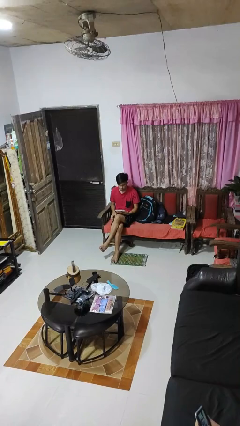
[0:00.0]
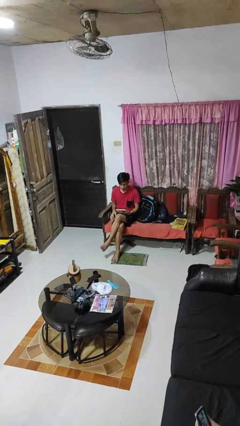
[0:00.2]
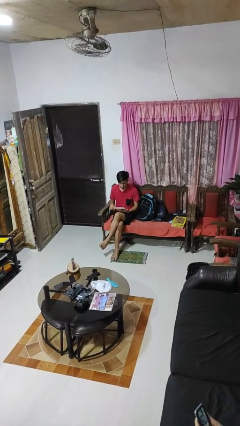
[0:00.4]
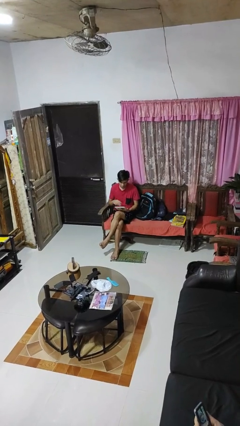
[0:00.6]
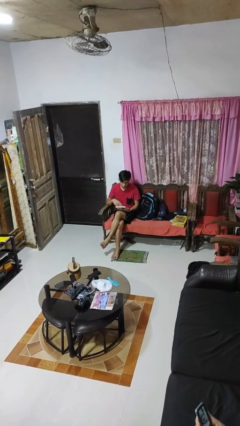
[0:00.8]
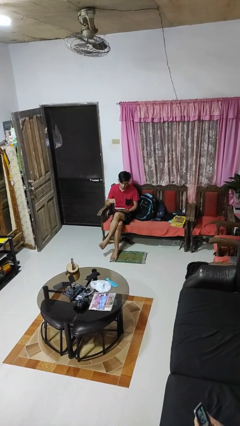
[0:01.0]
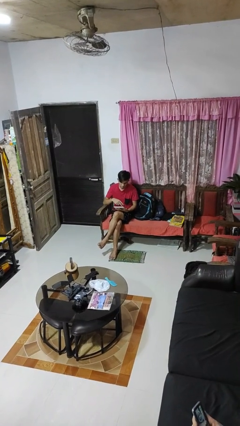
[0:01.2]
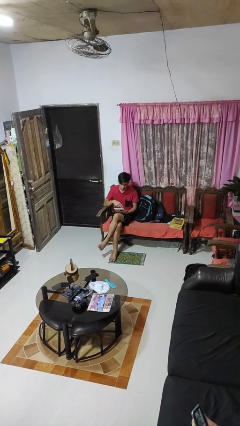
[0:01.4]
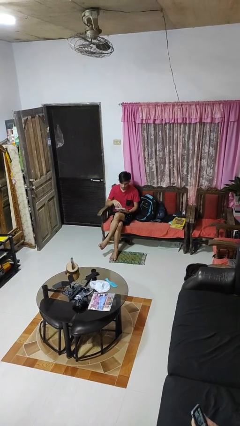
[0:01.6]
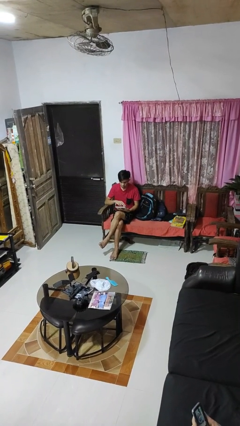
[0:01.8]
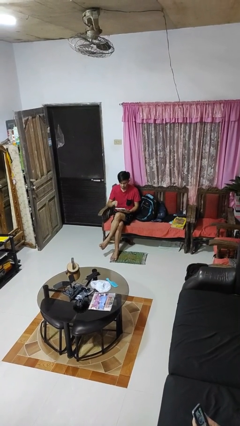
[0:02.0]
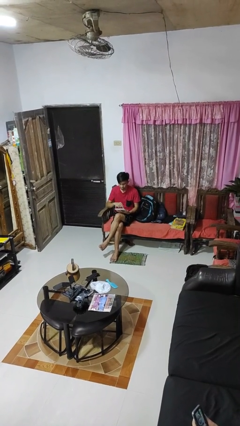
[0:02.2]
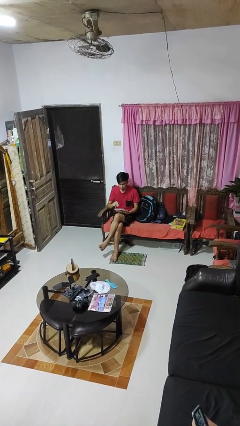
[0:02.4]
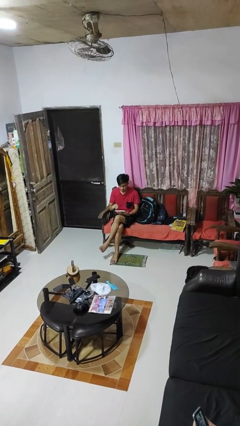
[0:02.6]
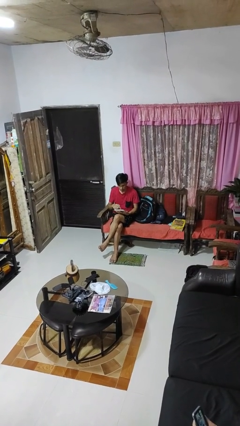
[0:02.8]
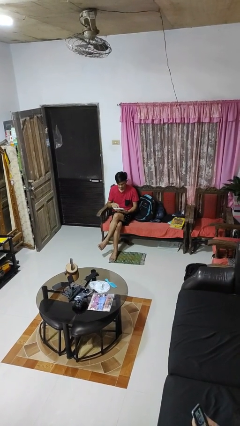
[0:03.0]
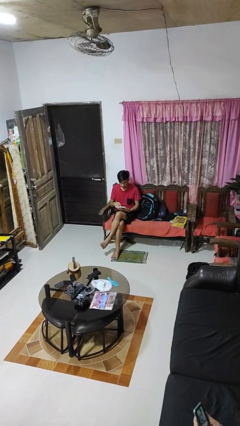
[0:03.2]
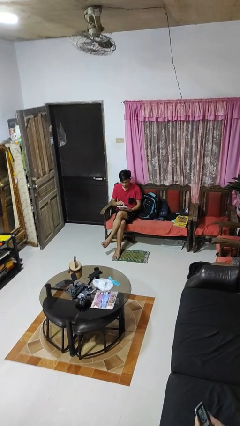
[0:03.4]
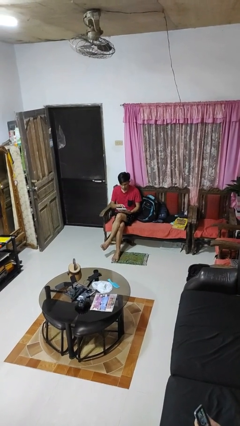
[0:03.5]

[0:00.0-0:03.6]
person interacts with tablet

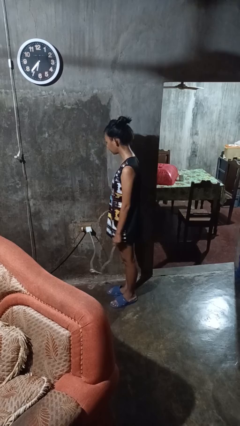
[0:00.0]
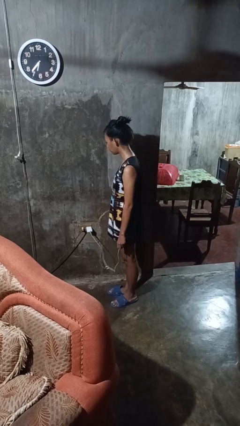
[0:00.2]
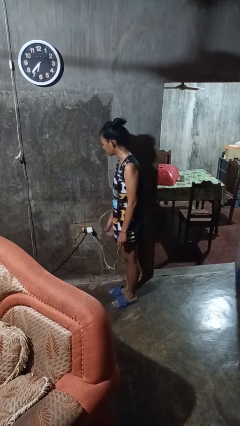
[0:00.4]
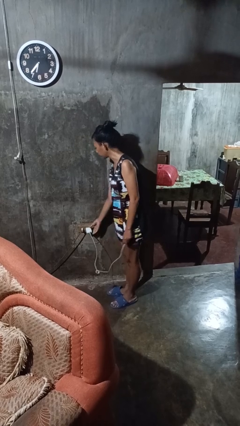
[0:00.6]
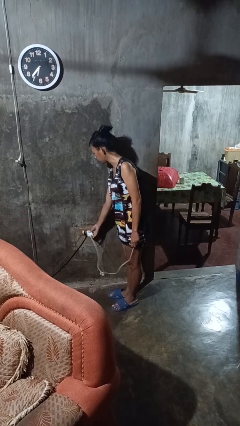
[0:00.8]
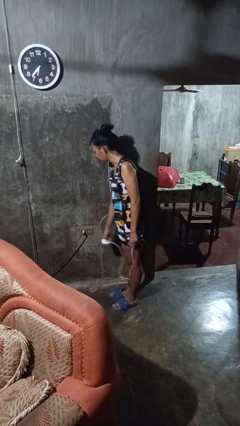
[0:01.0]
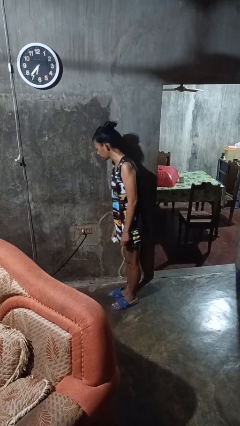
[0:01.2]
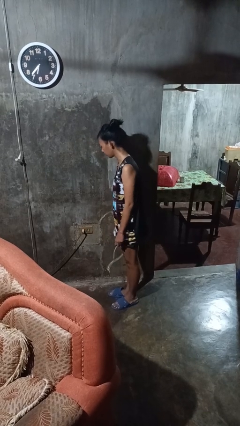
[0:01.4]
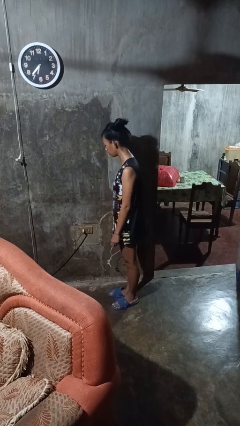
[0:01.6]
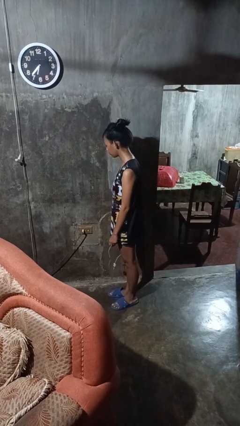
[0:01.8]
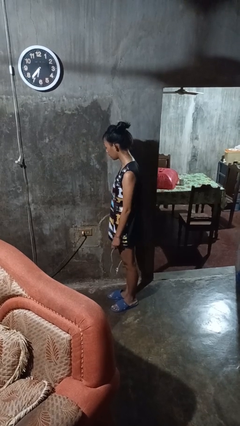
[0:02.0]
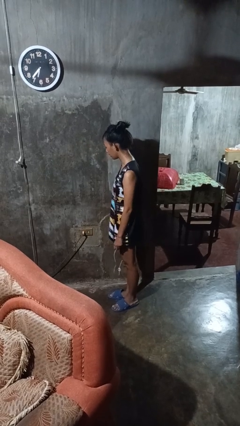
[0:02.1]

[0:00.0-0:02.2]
person unplugs from electrical socket

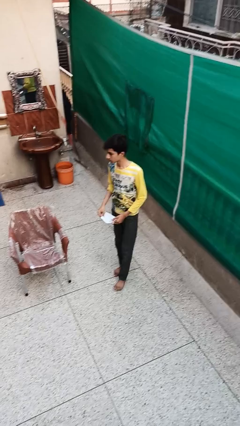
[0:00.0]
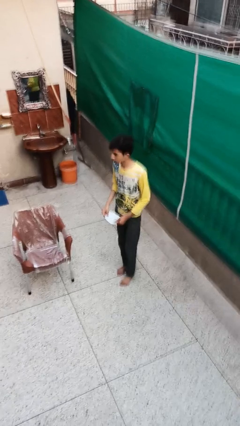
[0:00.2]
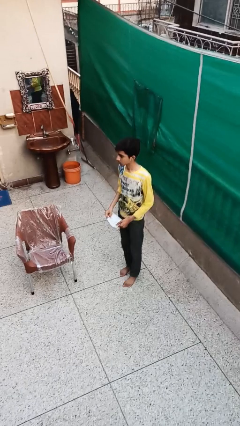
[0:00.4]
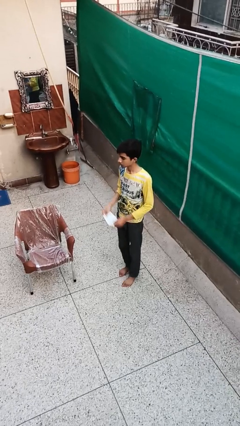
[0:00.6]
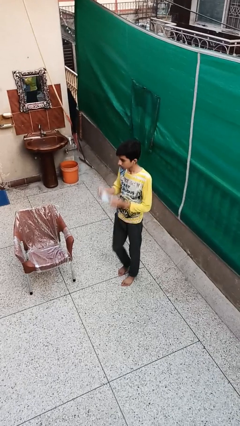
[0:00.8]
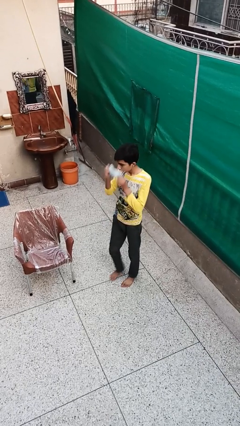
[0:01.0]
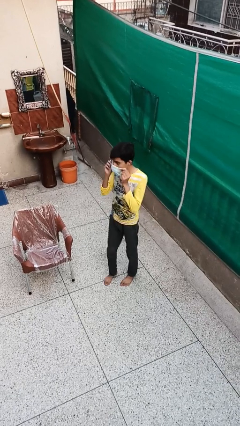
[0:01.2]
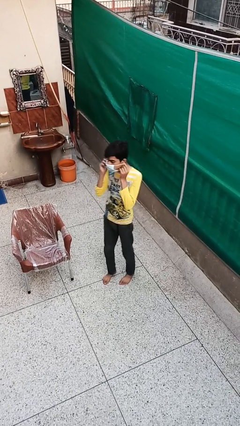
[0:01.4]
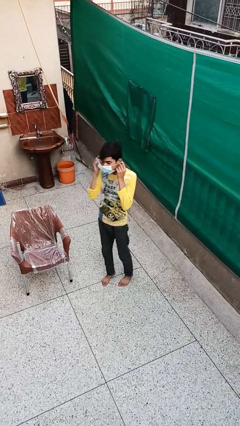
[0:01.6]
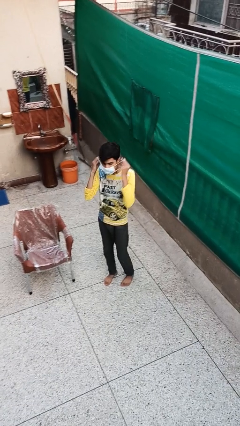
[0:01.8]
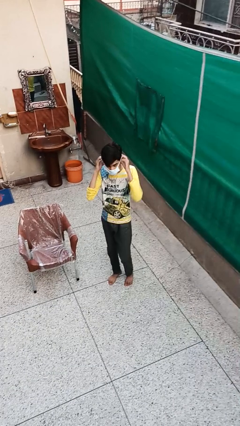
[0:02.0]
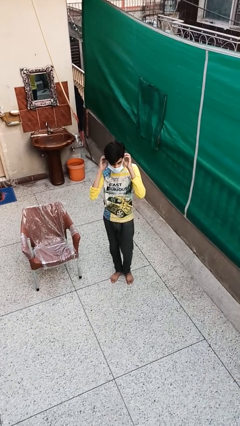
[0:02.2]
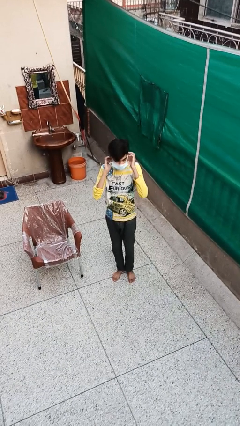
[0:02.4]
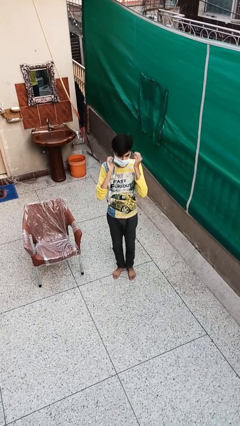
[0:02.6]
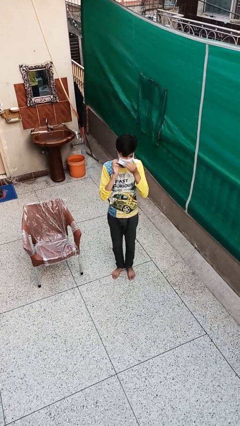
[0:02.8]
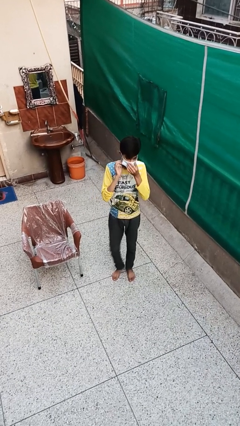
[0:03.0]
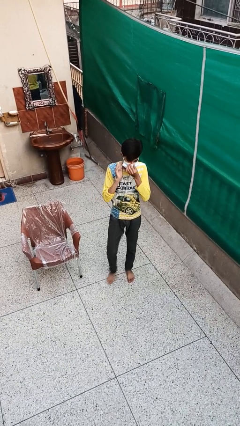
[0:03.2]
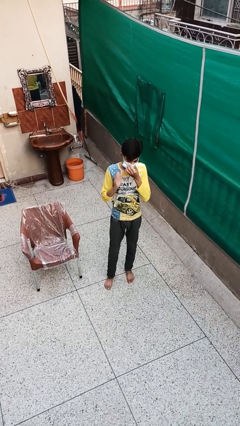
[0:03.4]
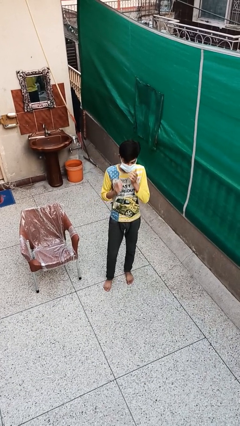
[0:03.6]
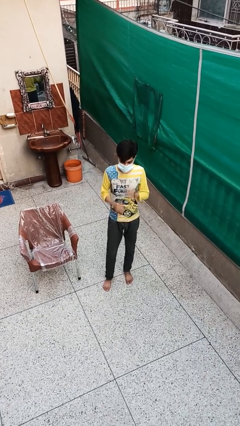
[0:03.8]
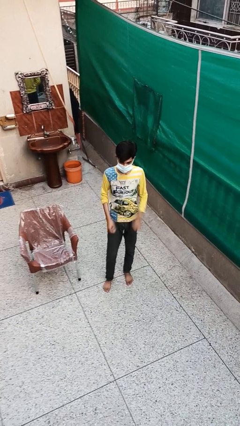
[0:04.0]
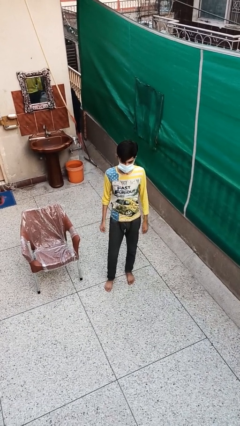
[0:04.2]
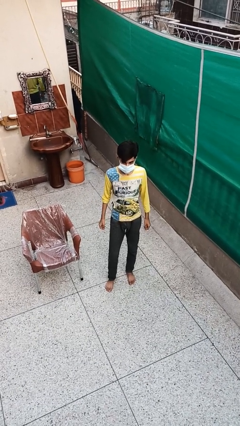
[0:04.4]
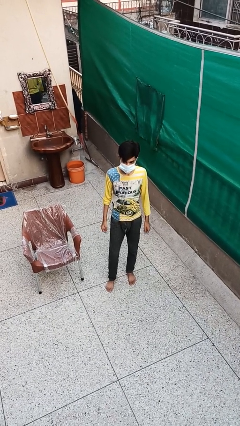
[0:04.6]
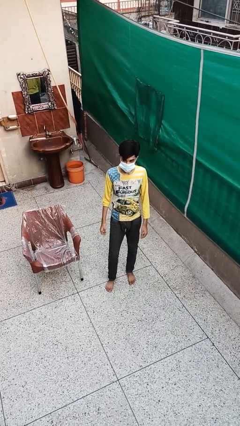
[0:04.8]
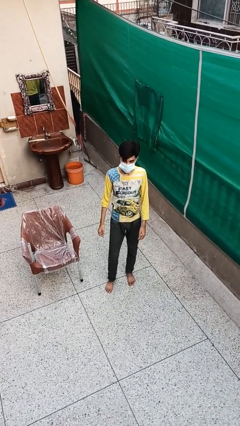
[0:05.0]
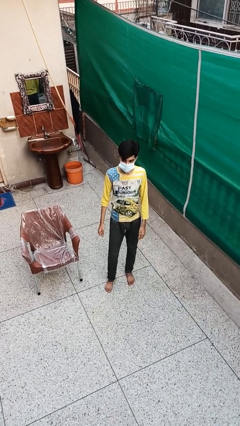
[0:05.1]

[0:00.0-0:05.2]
person puts on facemask

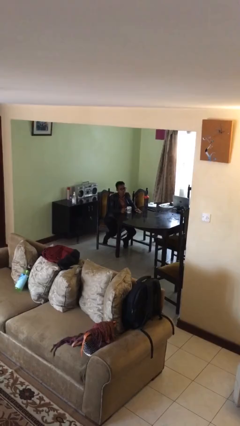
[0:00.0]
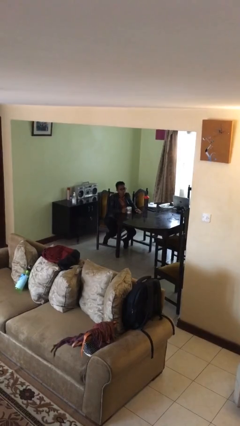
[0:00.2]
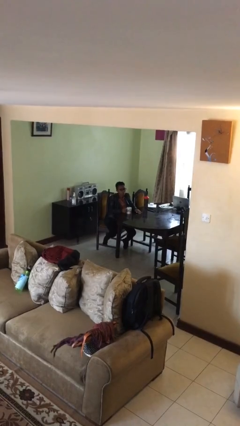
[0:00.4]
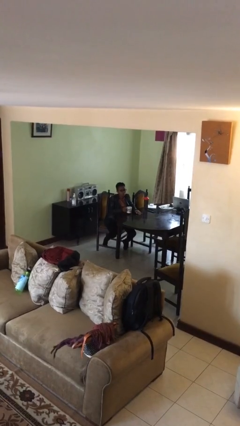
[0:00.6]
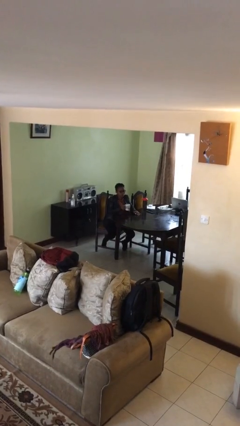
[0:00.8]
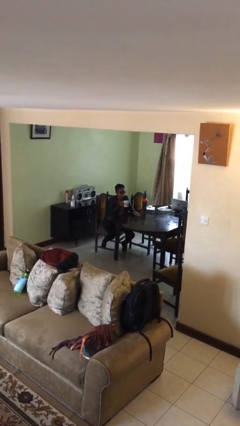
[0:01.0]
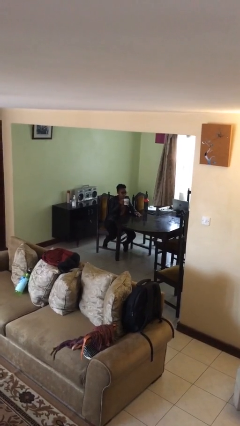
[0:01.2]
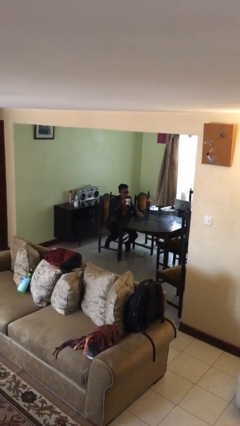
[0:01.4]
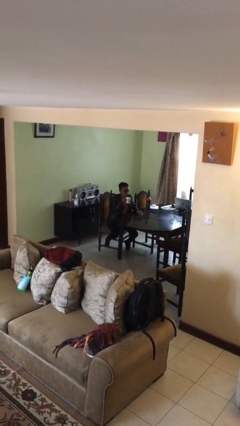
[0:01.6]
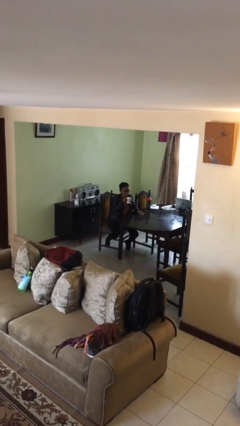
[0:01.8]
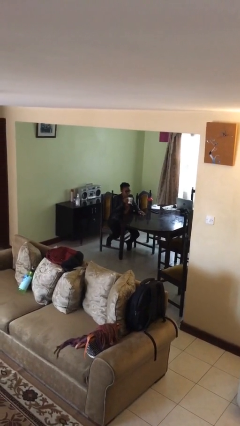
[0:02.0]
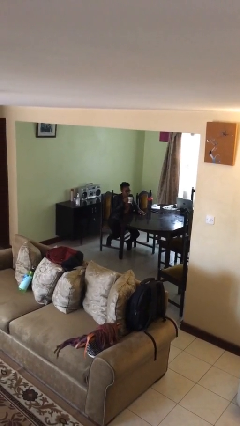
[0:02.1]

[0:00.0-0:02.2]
person picks up object from table

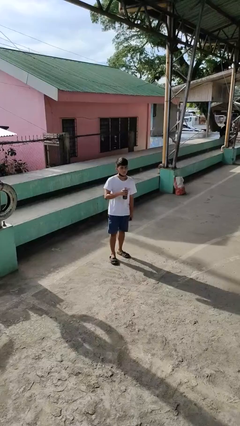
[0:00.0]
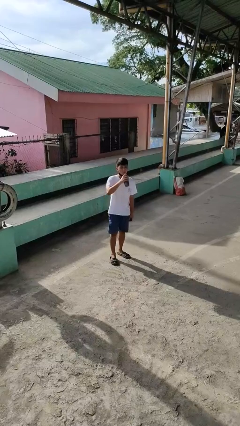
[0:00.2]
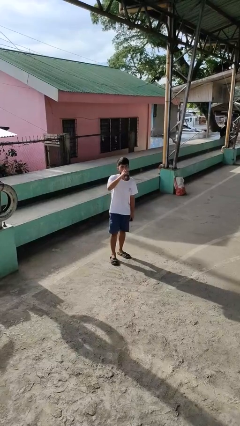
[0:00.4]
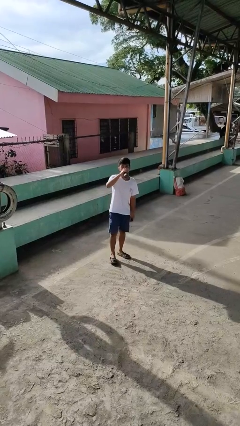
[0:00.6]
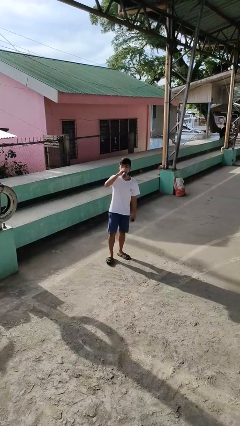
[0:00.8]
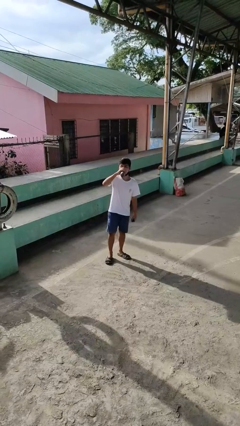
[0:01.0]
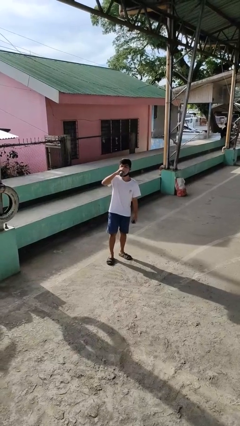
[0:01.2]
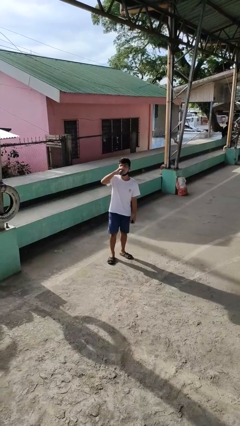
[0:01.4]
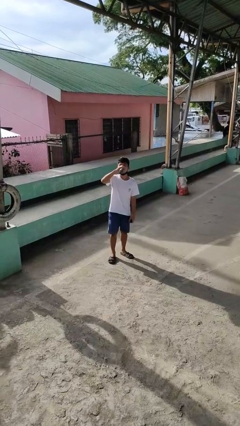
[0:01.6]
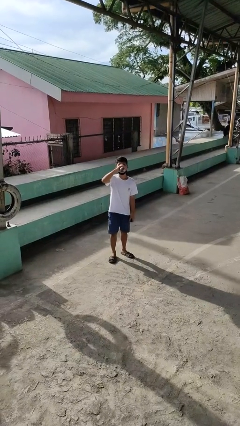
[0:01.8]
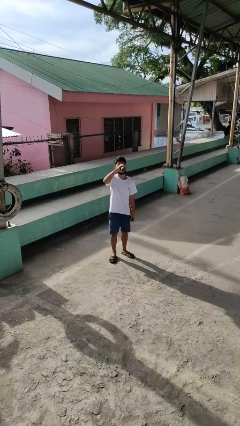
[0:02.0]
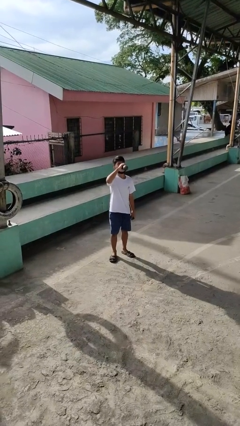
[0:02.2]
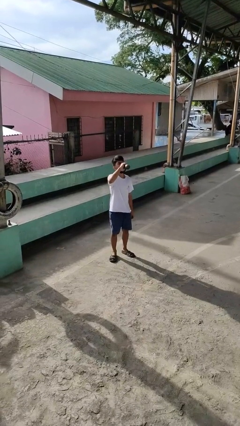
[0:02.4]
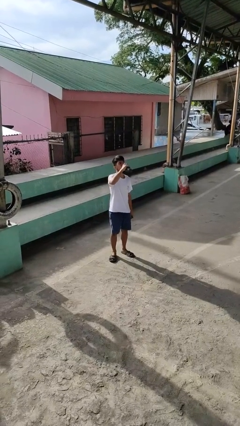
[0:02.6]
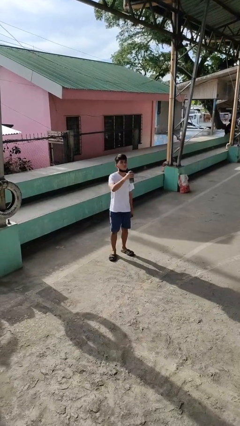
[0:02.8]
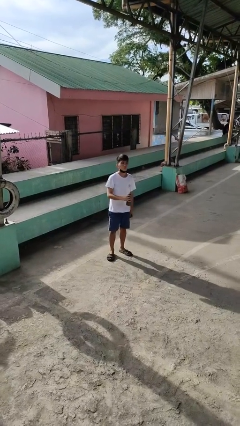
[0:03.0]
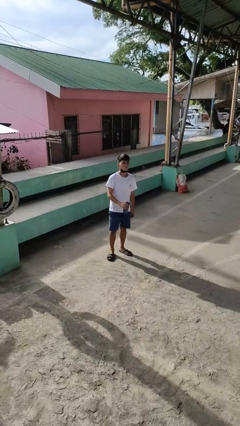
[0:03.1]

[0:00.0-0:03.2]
person drinks from bottle

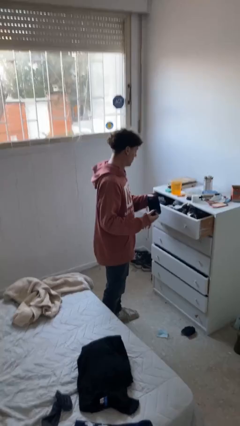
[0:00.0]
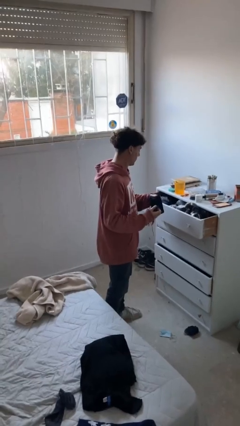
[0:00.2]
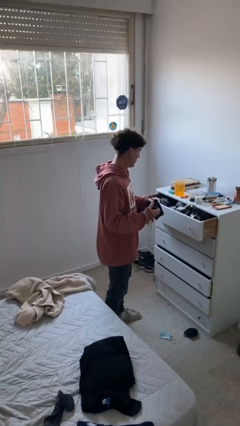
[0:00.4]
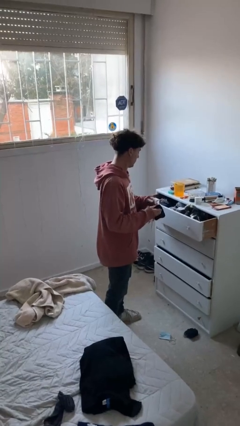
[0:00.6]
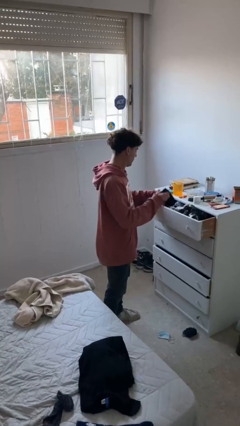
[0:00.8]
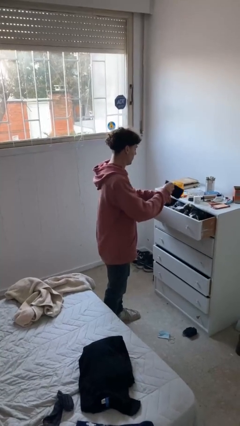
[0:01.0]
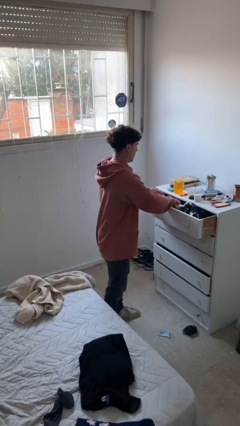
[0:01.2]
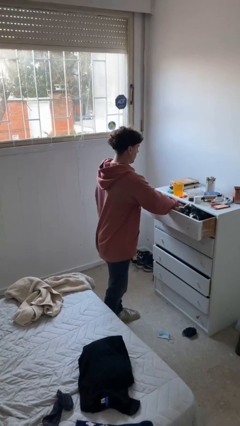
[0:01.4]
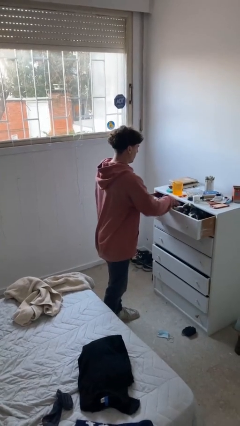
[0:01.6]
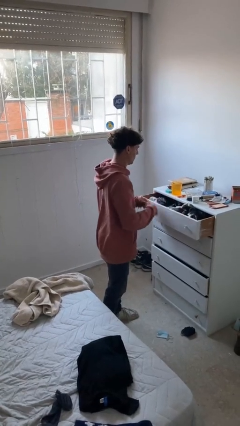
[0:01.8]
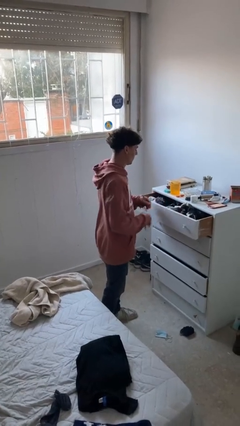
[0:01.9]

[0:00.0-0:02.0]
person puts clothes into dresser
